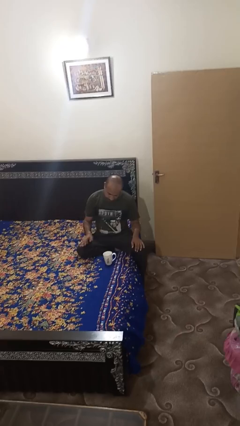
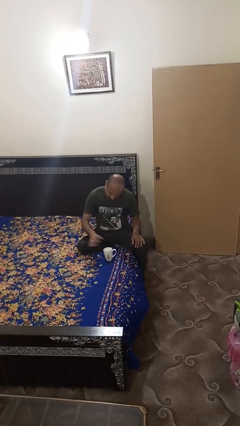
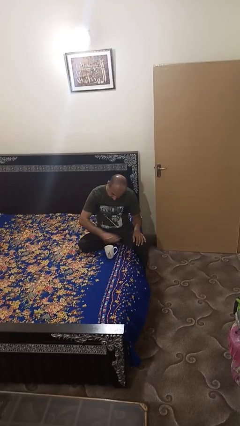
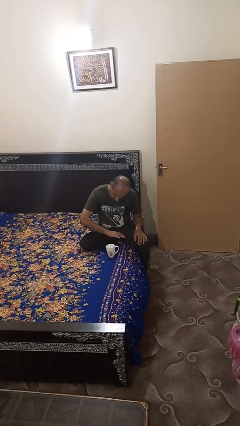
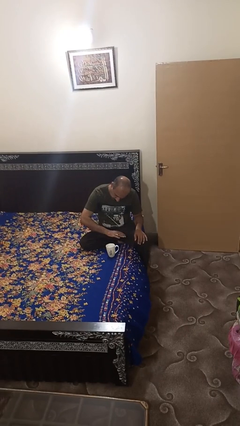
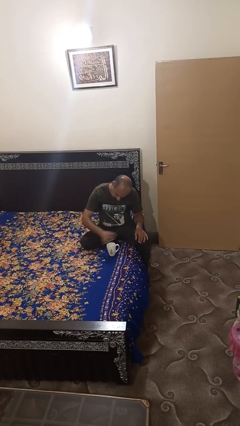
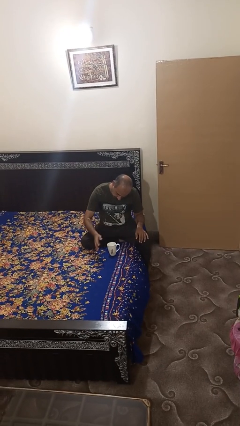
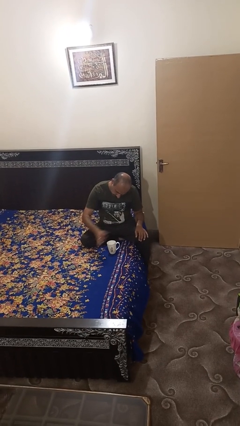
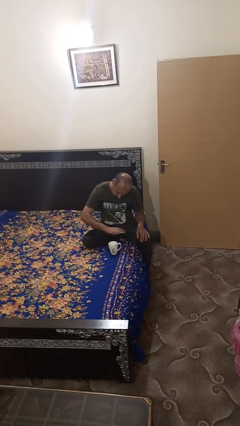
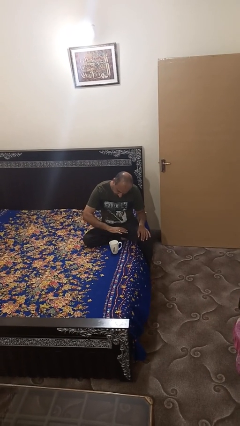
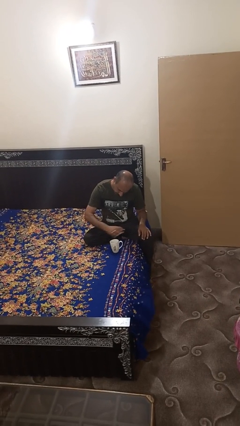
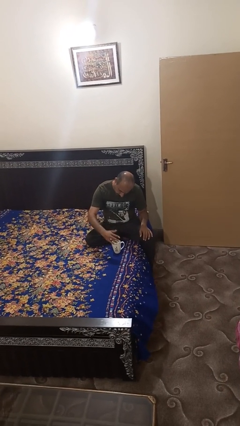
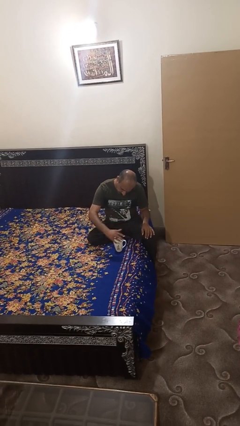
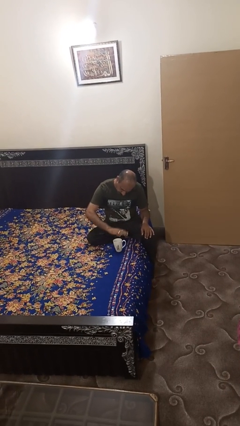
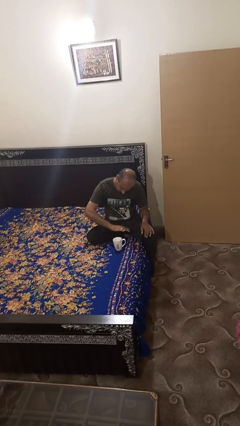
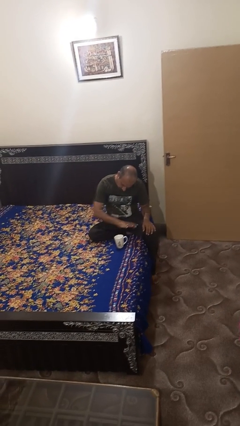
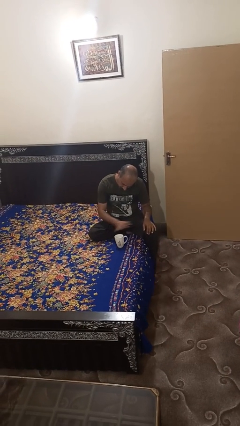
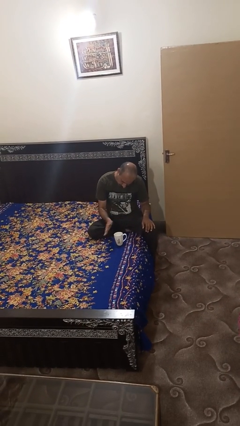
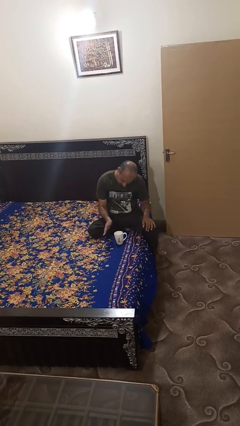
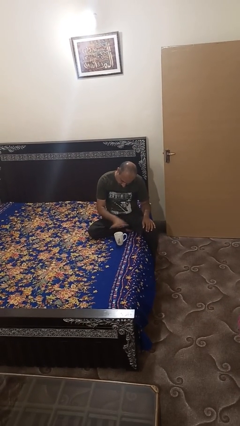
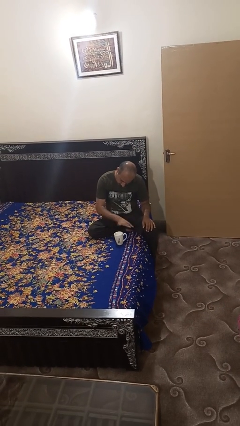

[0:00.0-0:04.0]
person waves hand over object

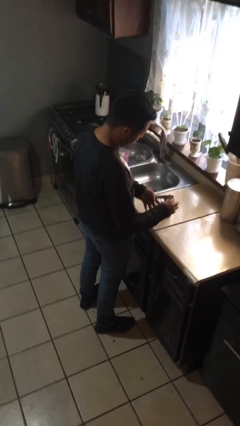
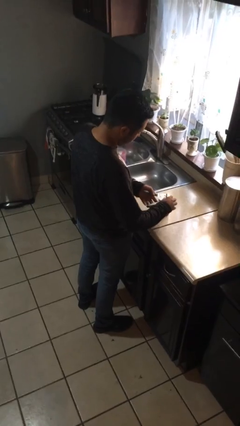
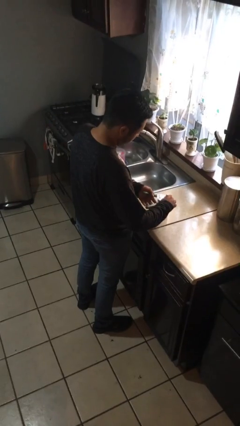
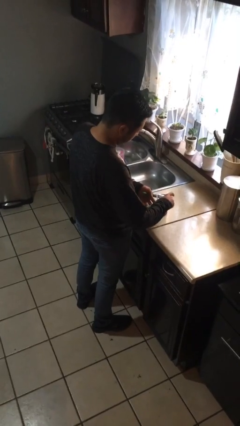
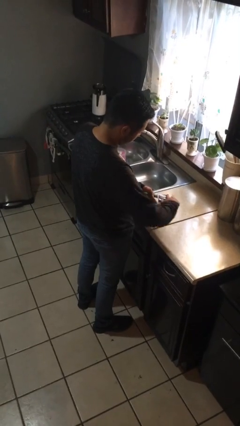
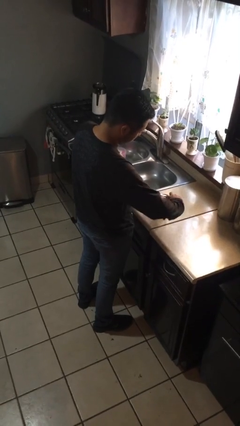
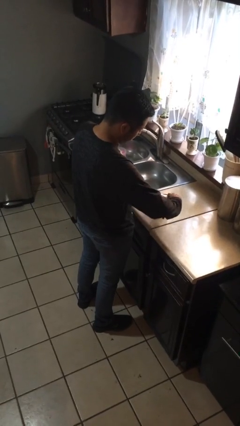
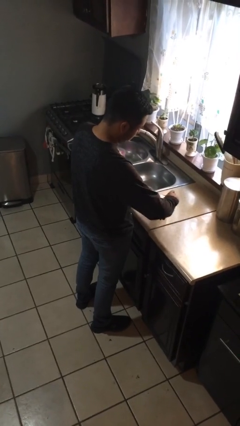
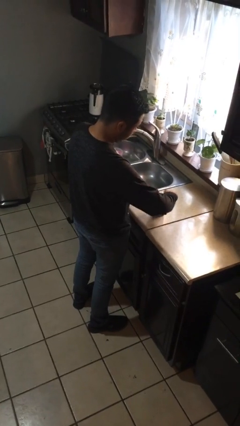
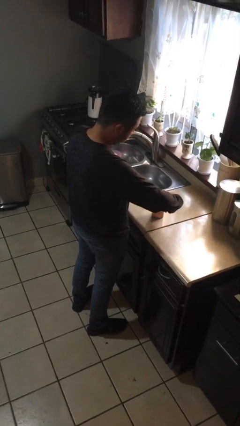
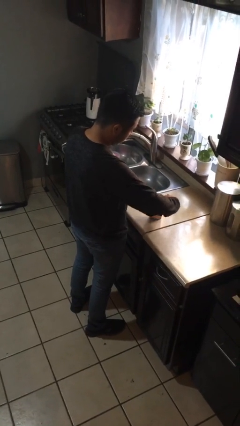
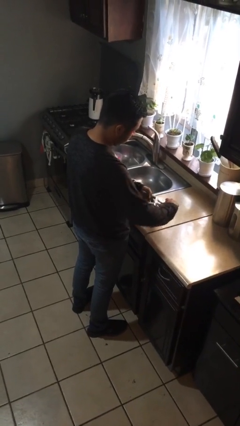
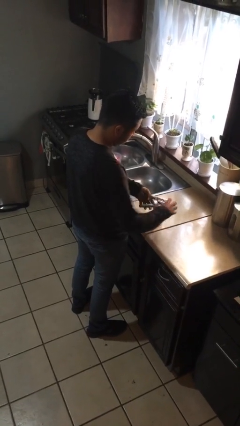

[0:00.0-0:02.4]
person opens can with can opener

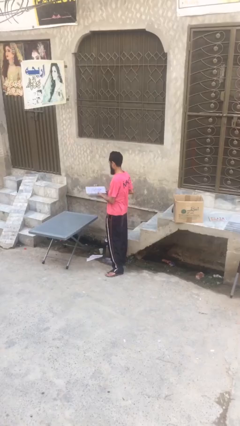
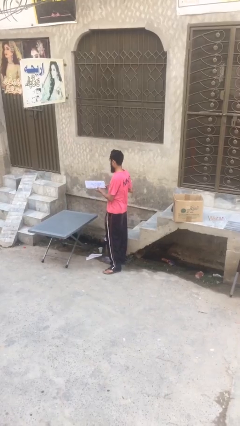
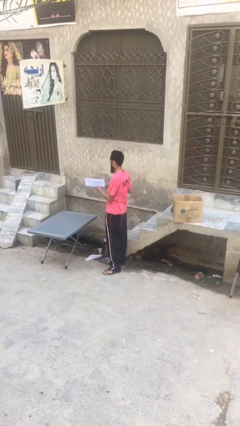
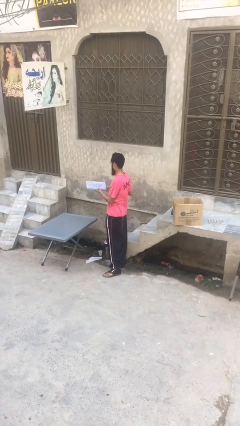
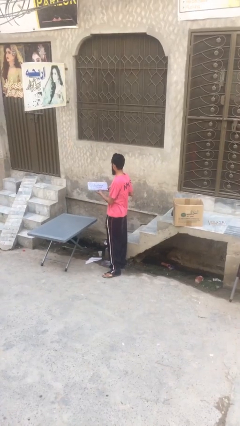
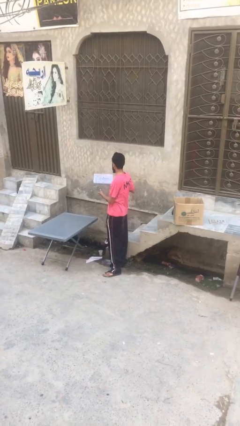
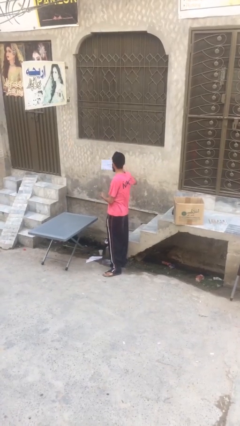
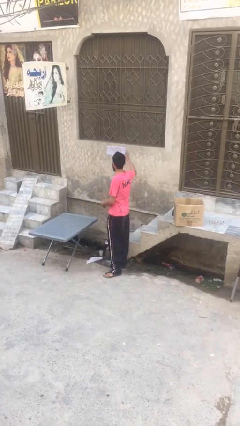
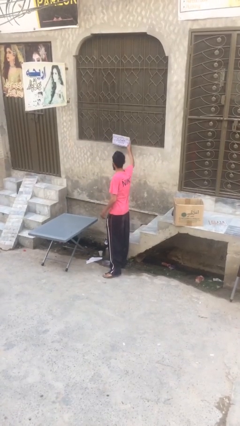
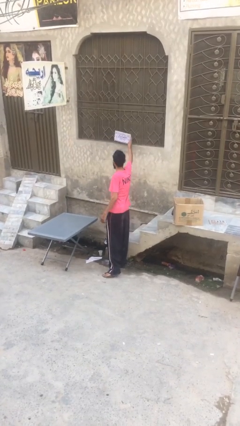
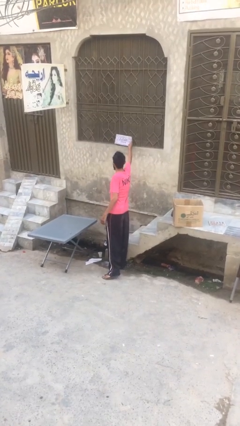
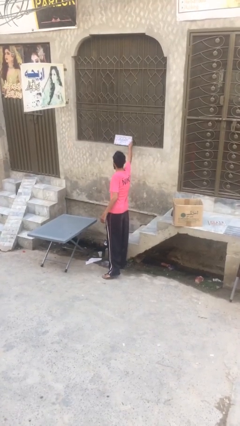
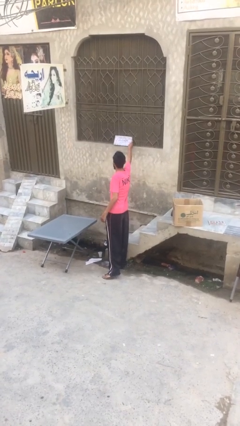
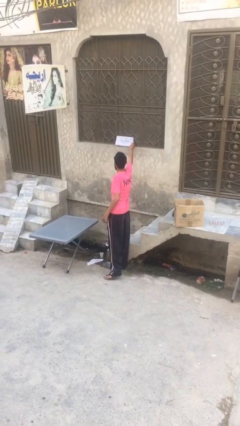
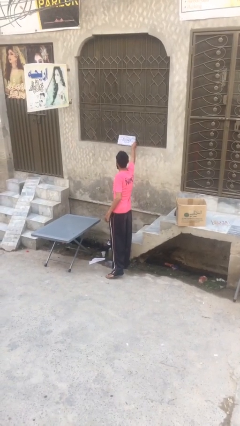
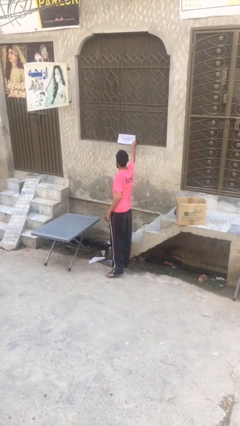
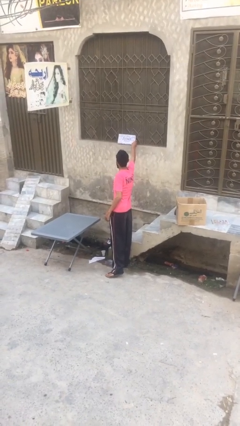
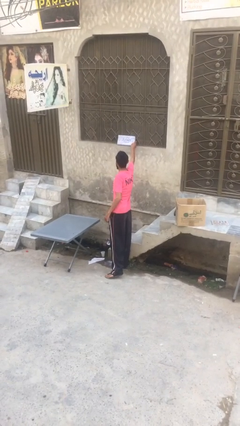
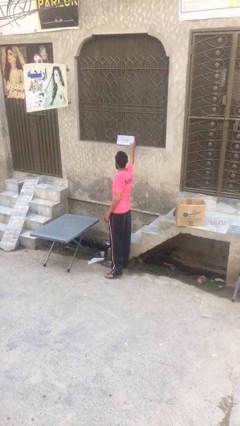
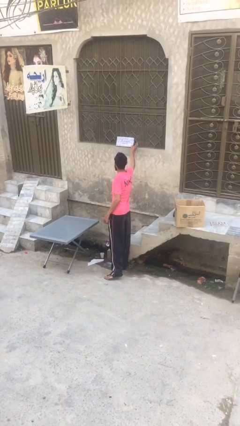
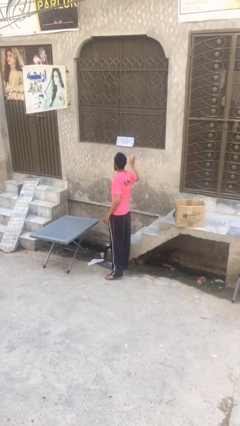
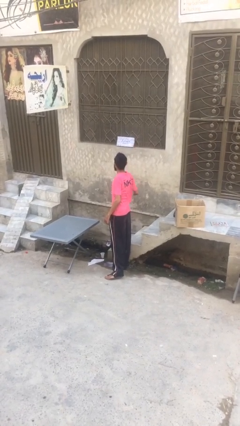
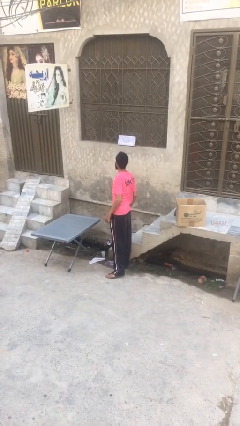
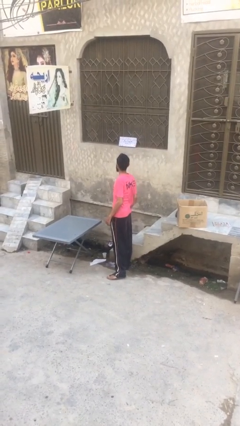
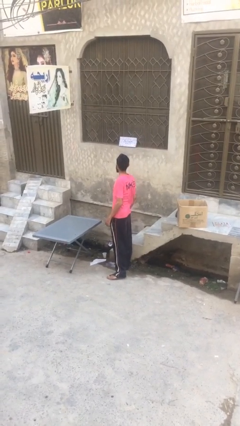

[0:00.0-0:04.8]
person puts down object on shelf

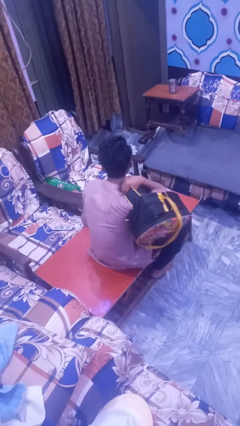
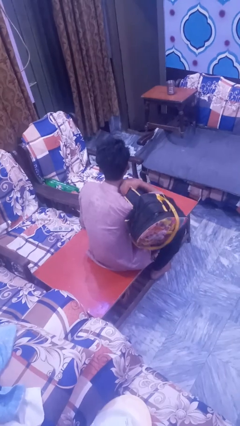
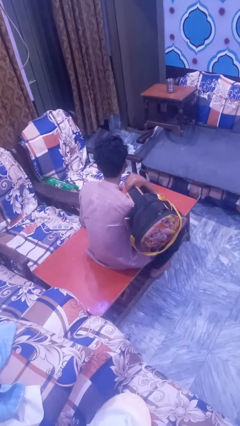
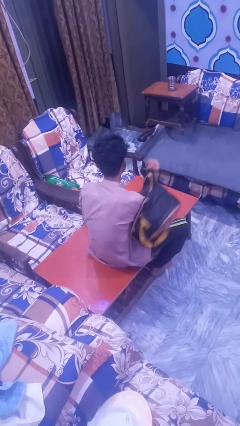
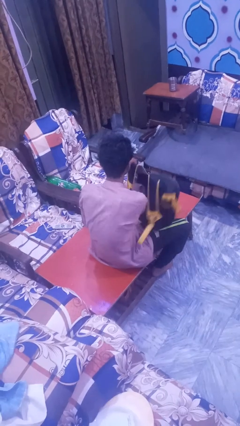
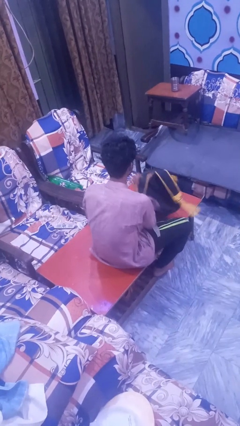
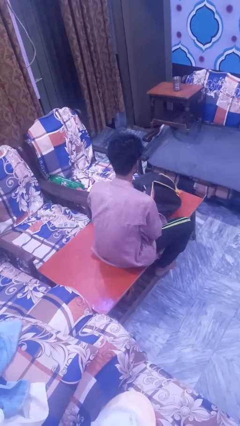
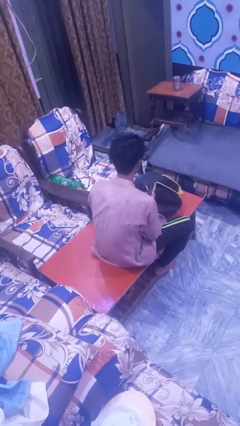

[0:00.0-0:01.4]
person takes off backpack

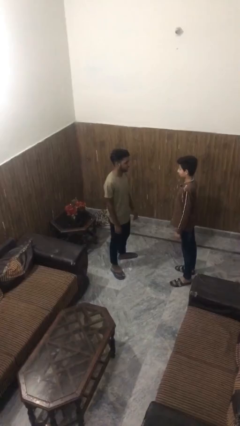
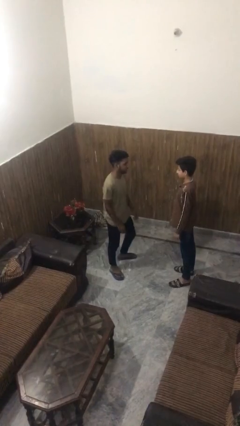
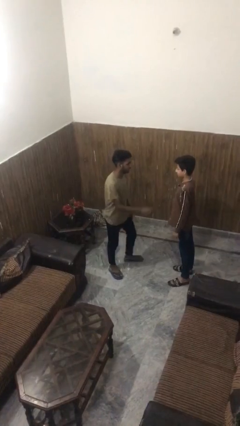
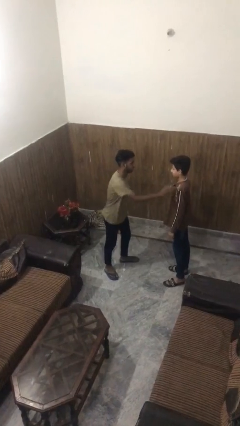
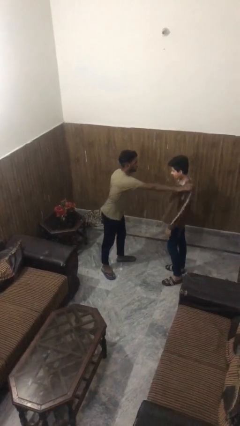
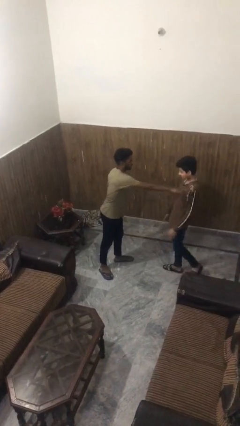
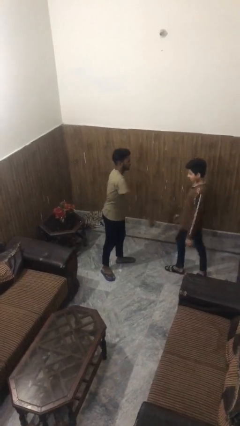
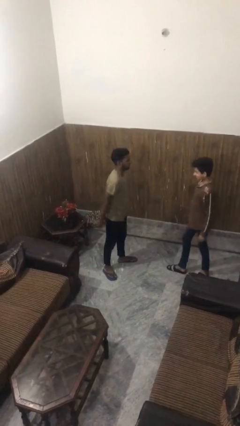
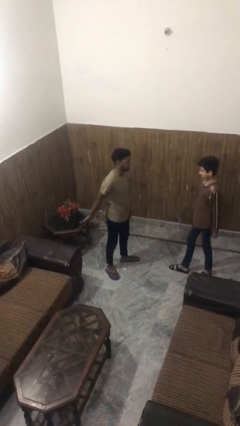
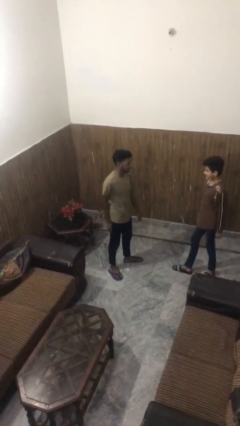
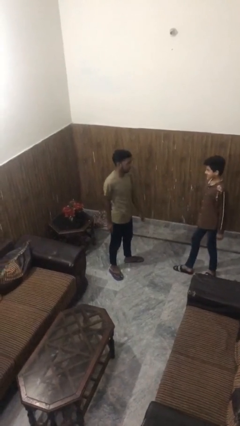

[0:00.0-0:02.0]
person shoves person

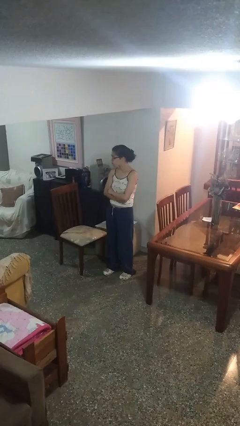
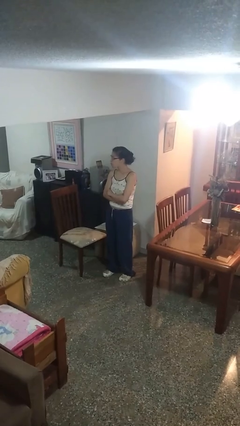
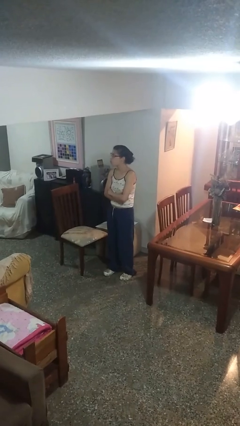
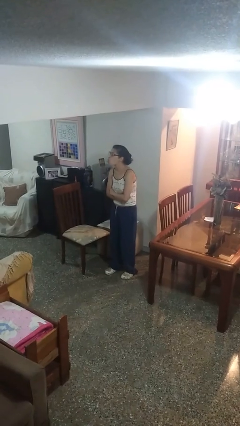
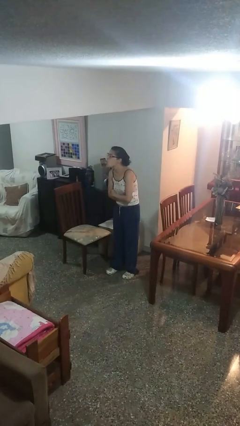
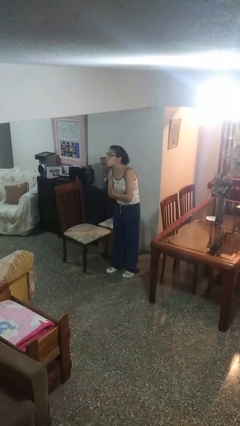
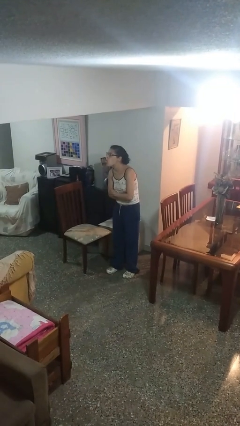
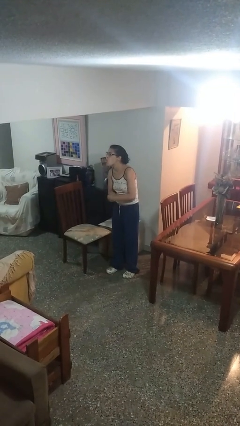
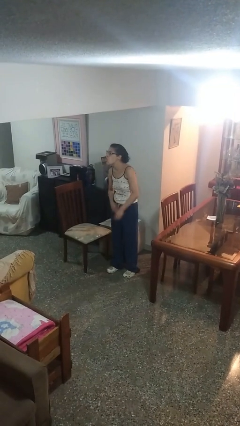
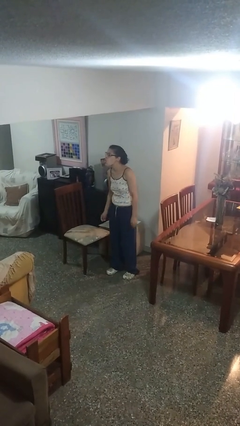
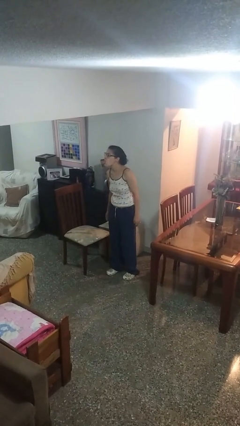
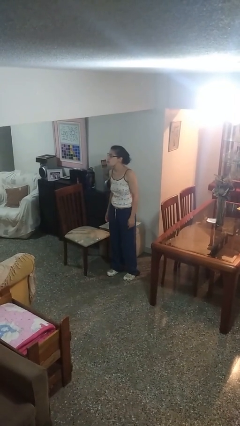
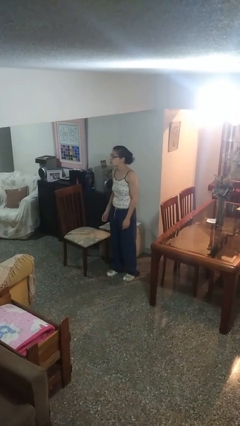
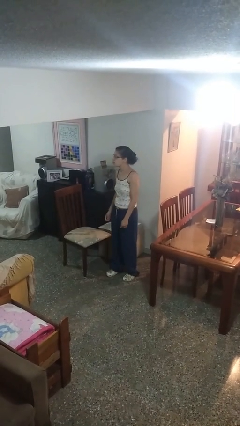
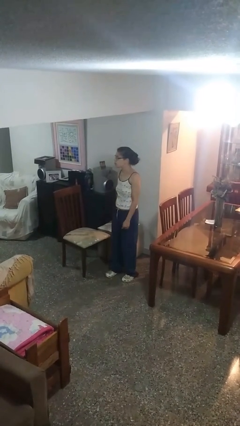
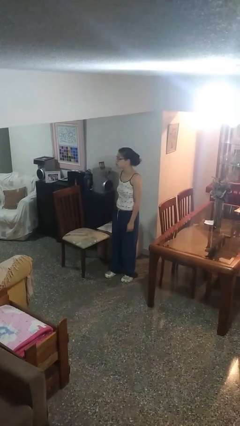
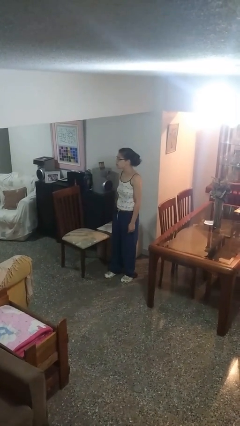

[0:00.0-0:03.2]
person sticks out tongue
